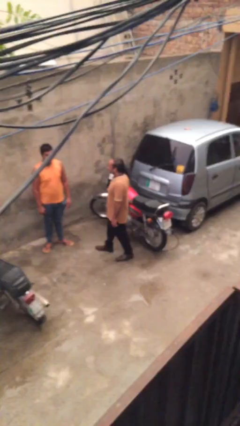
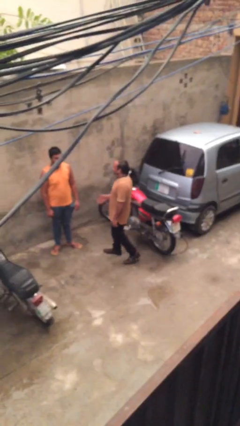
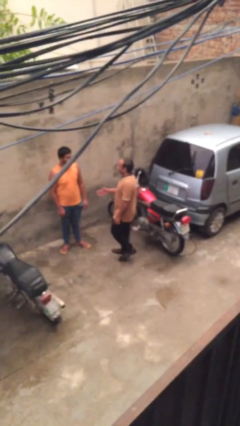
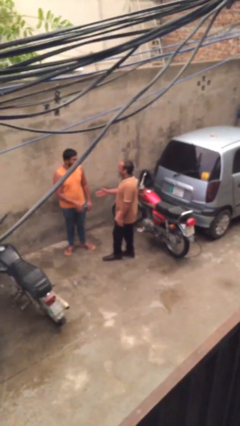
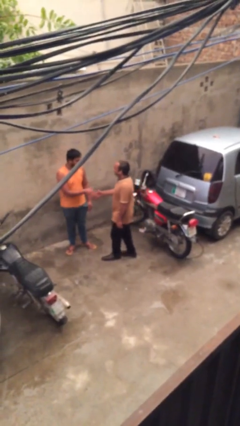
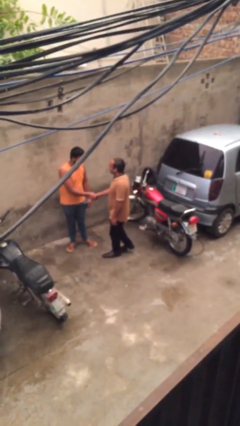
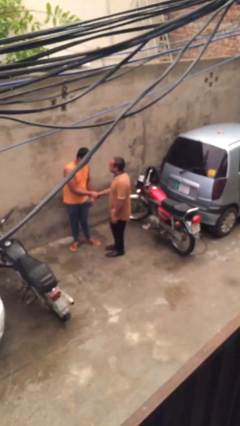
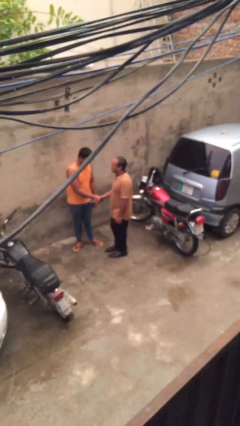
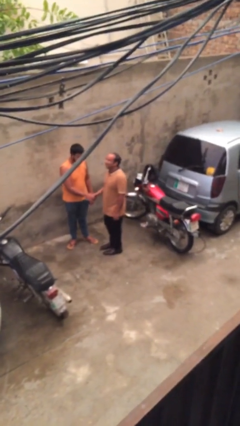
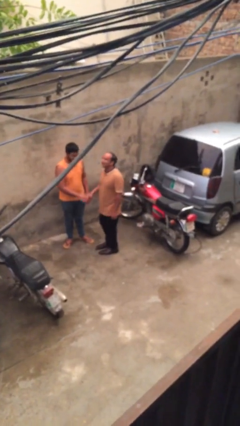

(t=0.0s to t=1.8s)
person shakes hand

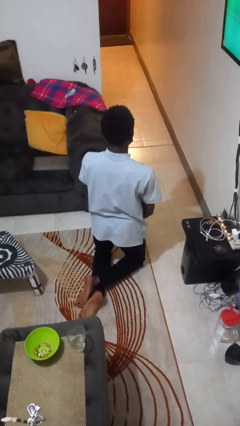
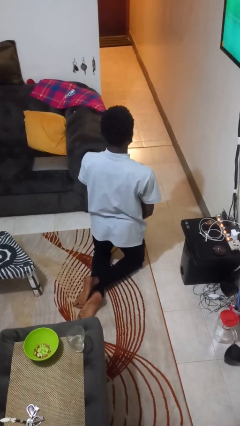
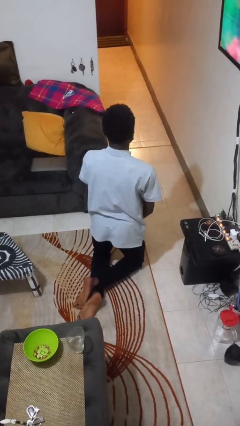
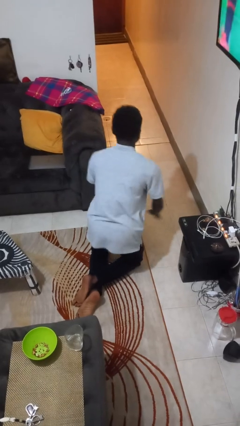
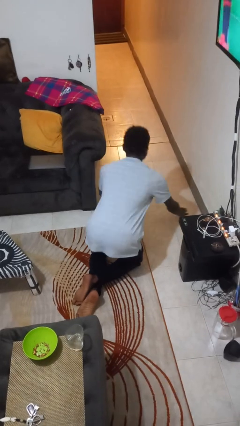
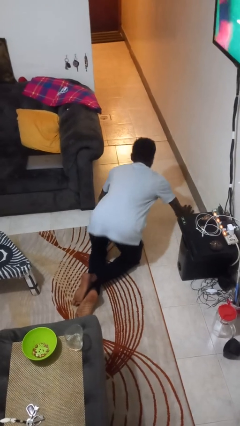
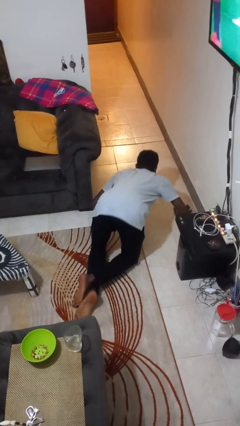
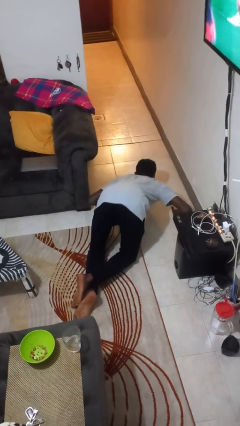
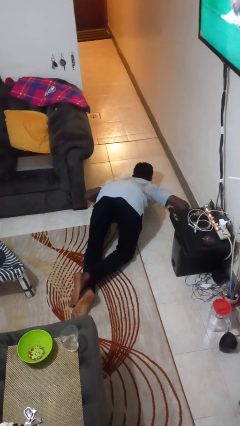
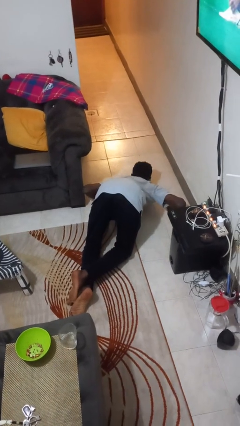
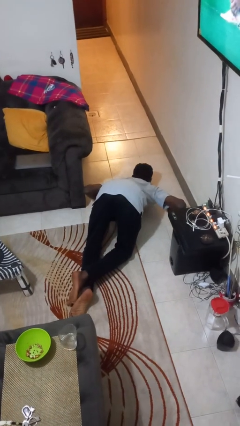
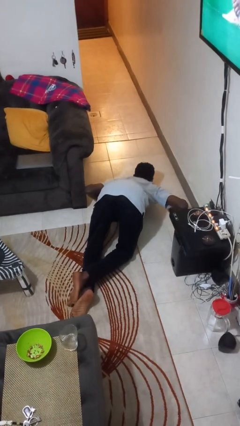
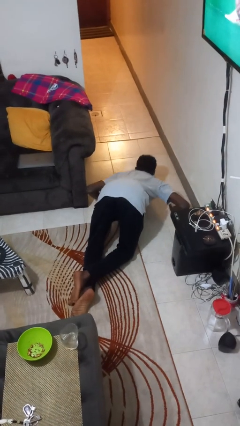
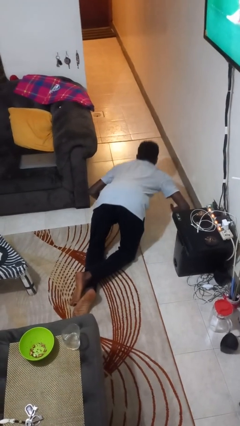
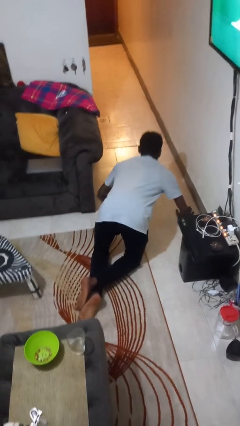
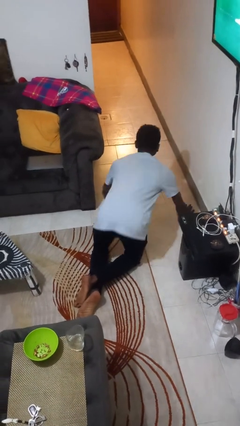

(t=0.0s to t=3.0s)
person exercises with pushup

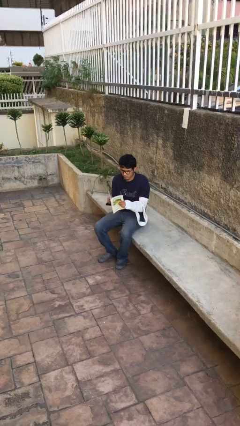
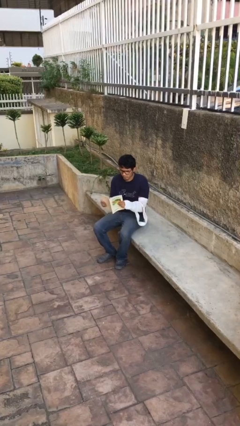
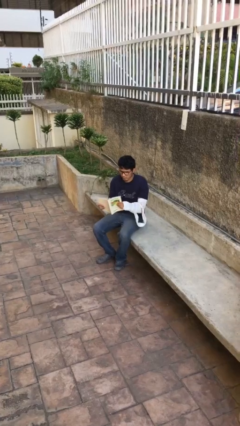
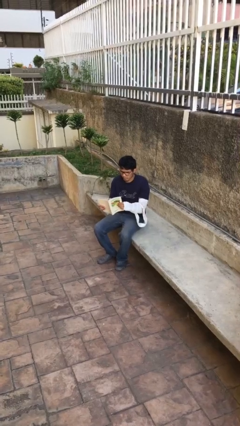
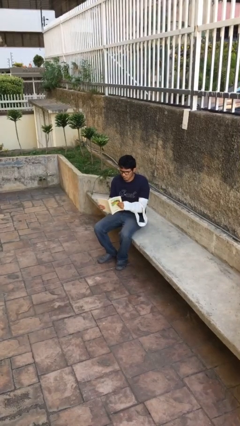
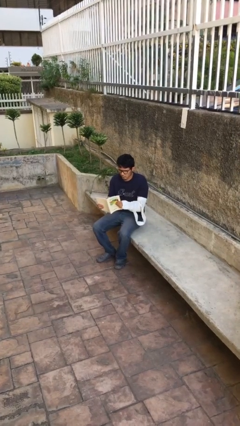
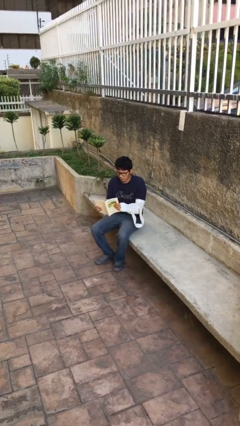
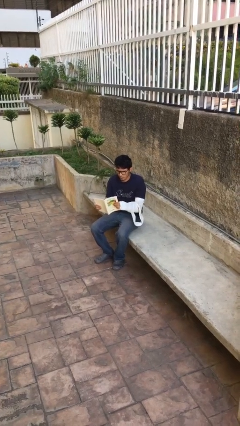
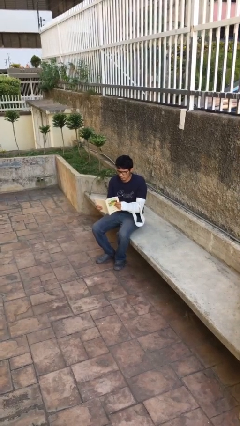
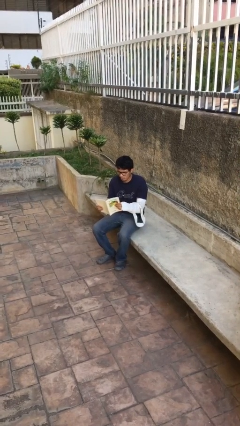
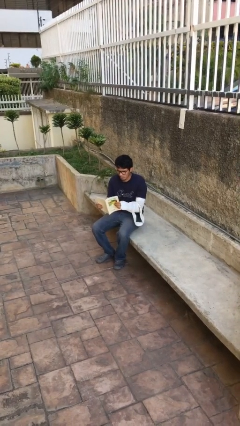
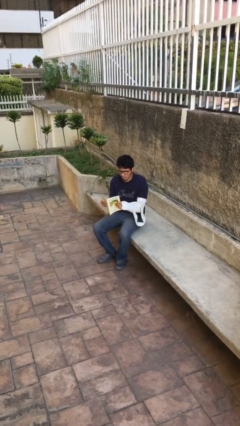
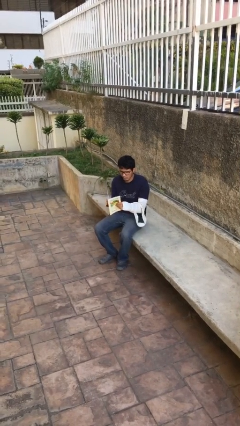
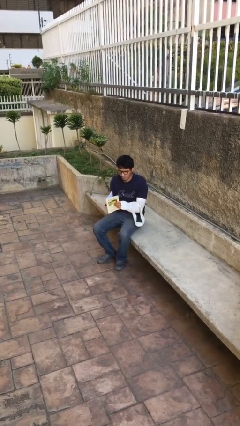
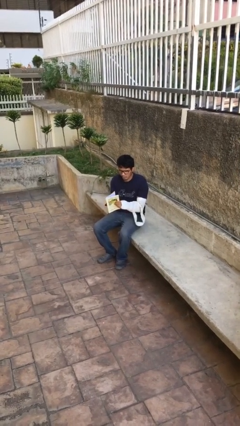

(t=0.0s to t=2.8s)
person reads document

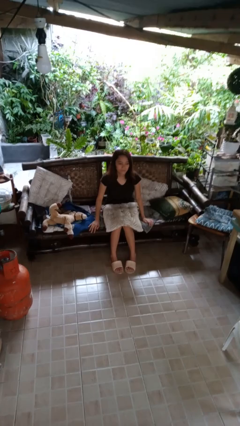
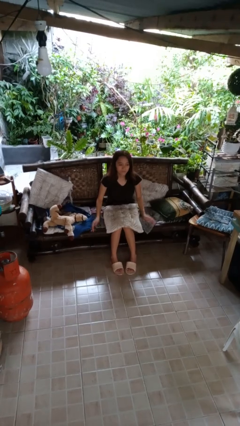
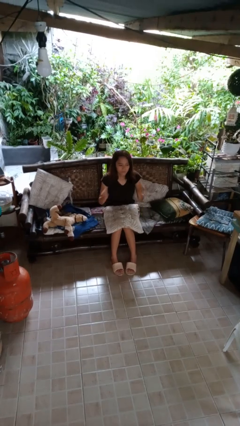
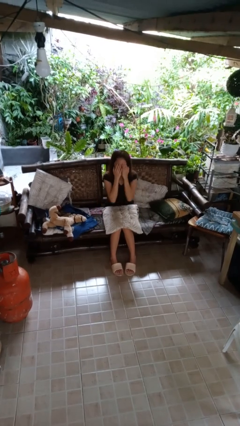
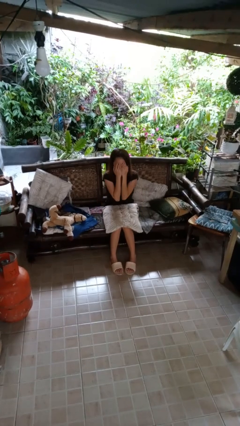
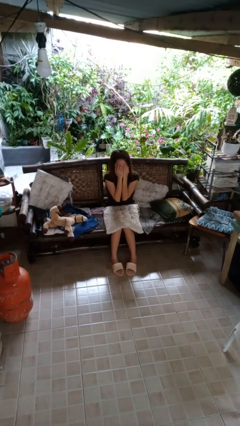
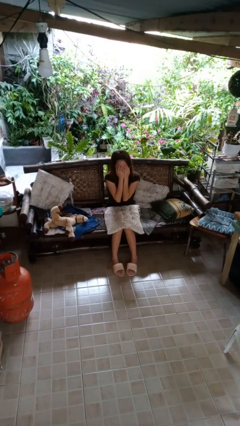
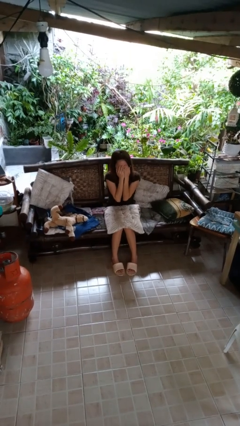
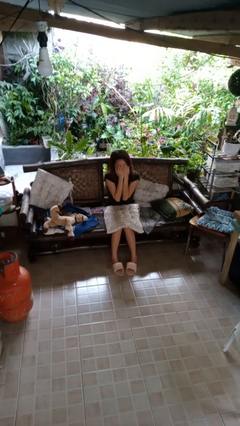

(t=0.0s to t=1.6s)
person covers face with hands

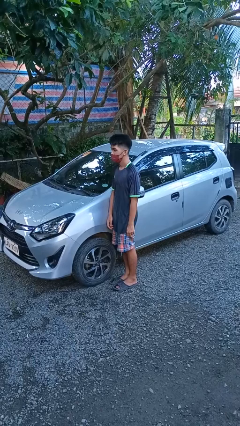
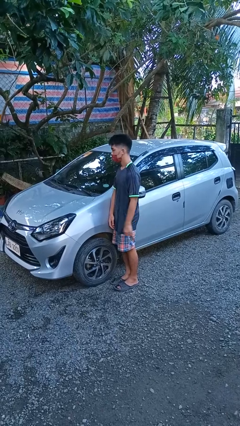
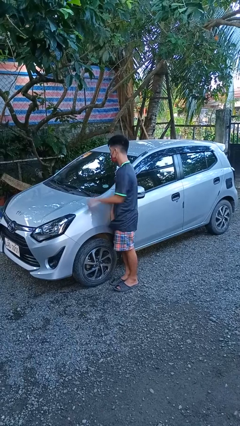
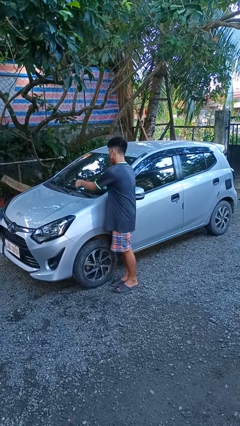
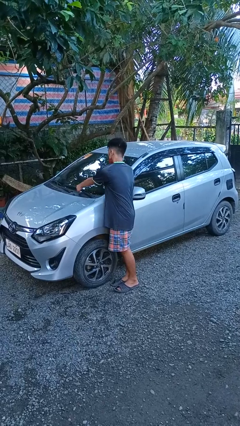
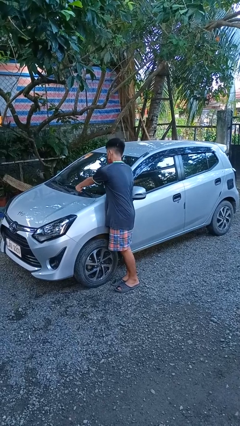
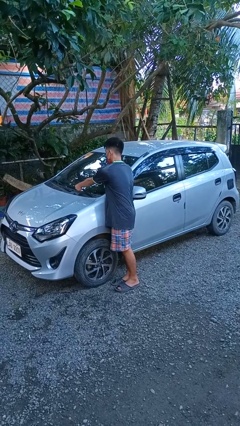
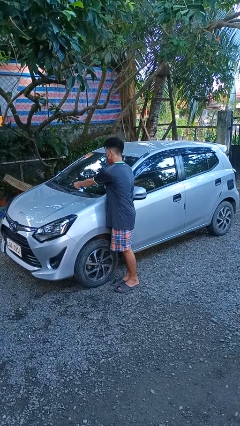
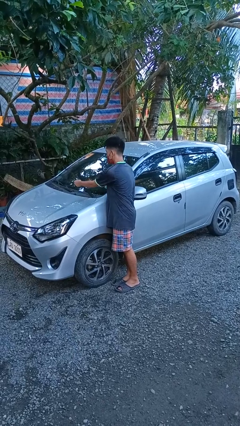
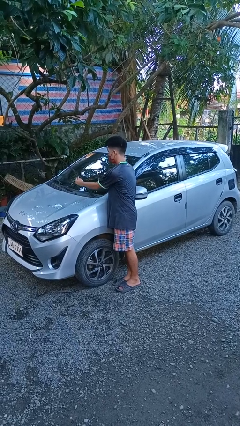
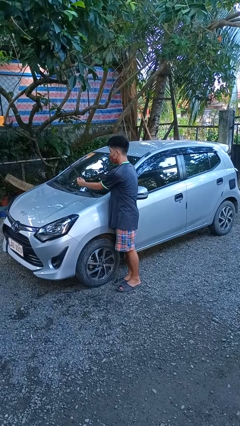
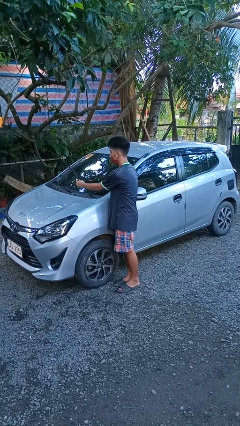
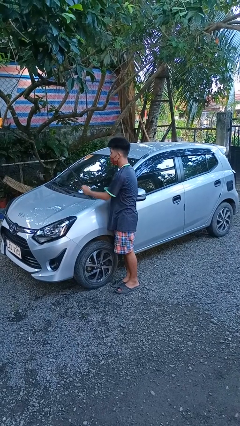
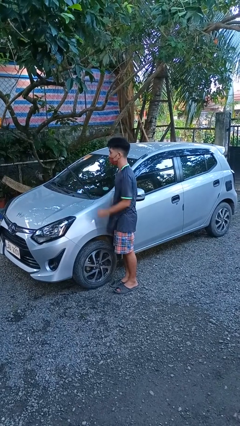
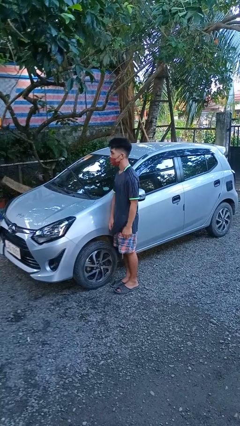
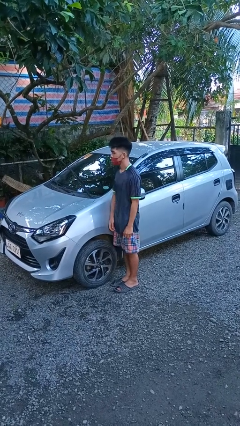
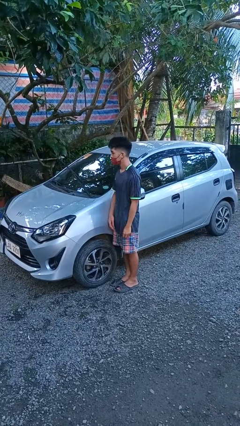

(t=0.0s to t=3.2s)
person flips up car wipers

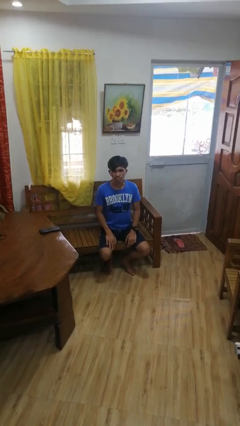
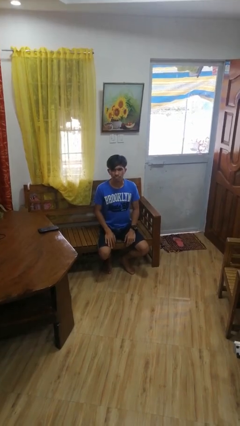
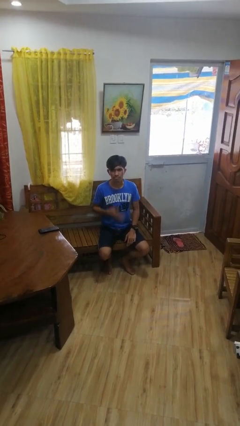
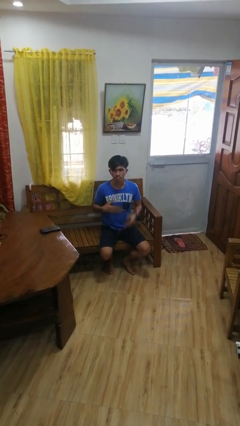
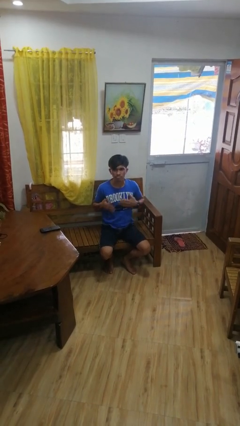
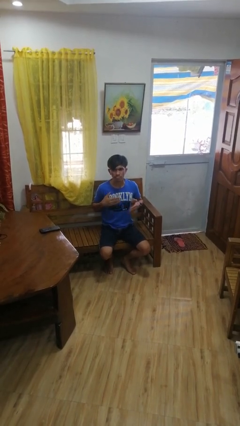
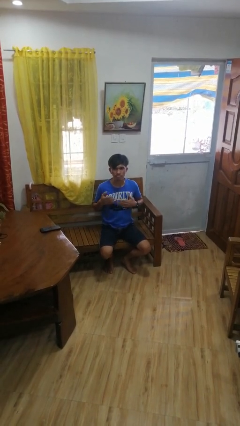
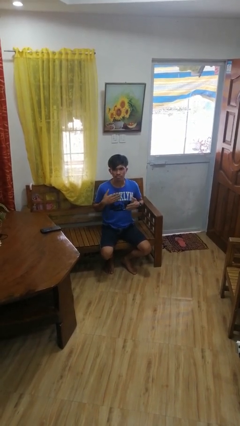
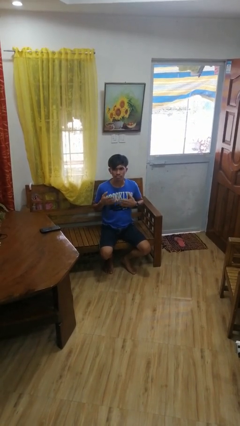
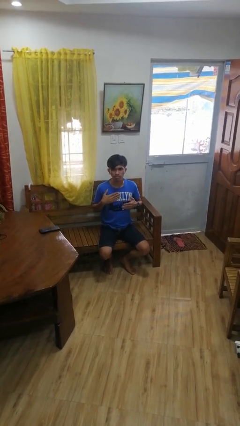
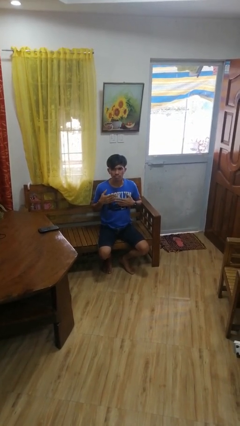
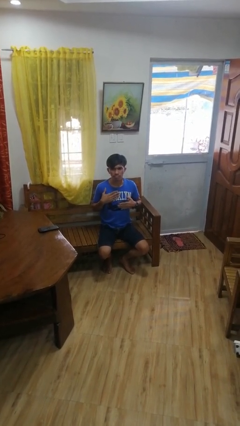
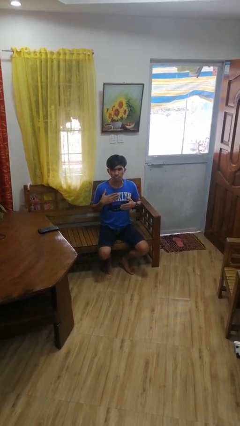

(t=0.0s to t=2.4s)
person drums on chest

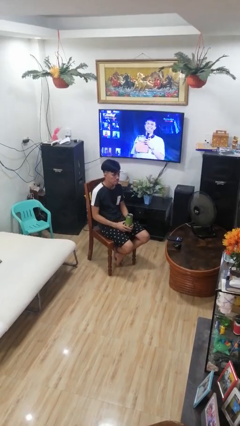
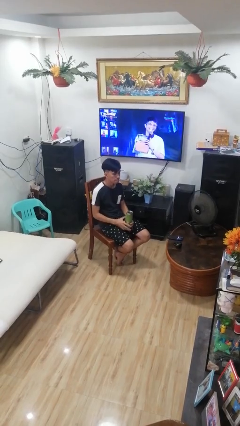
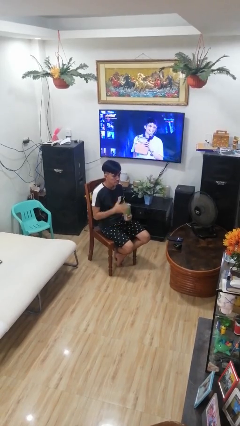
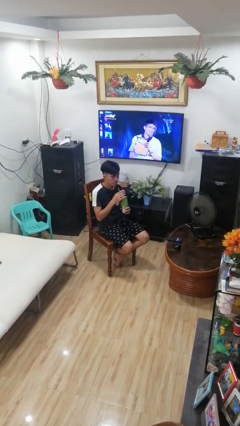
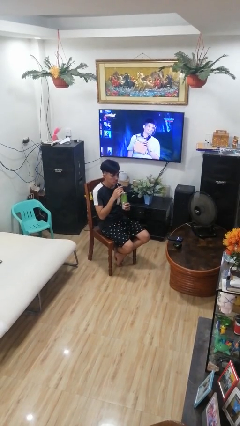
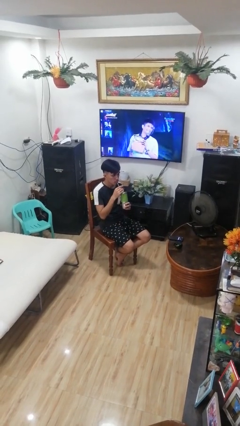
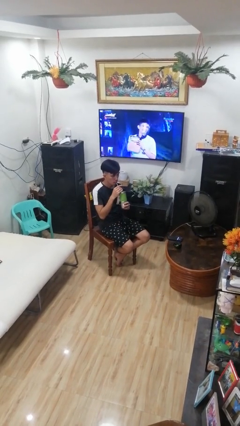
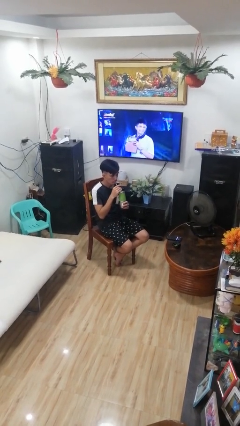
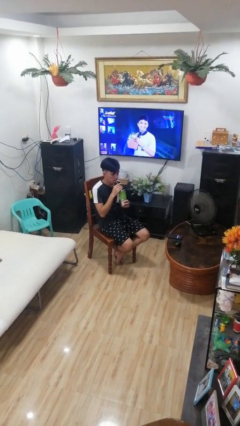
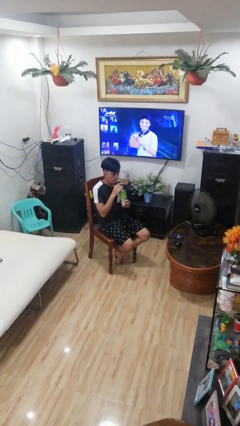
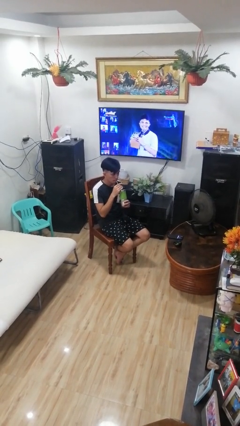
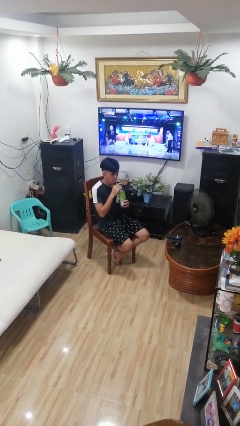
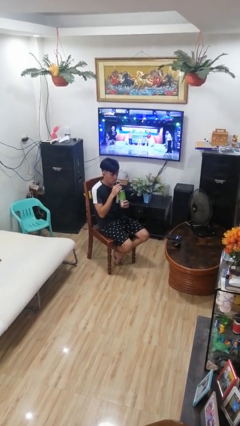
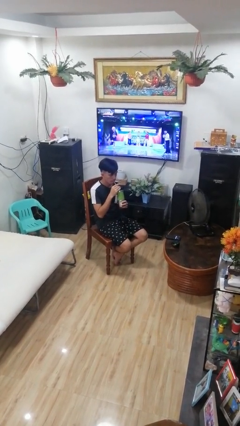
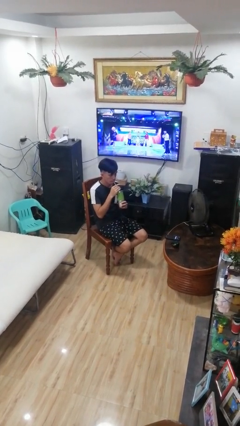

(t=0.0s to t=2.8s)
person drinks from straw
